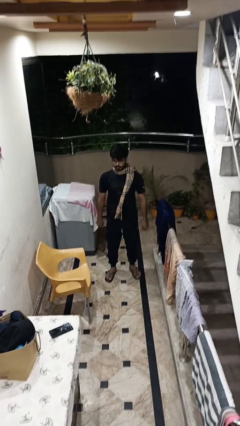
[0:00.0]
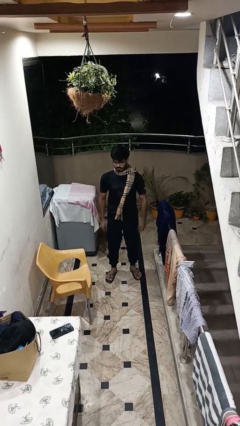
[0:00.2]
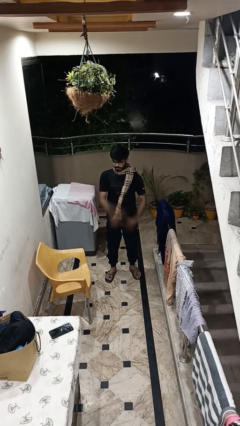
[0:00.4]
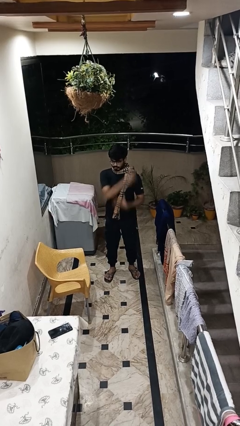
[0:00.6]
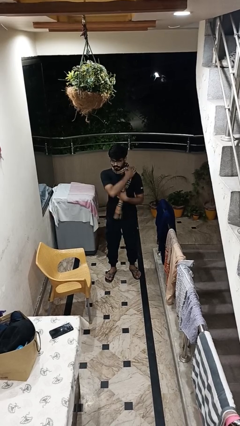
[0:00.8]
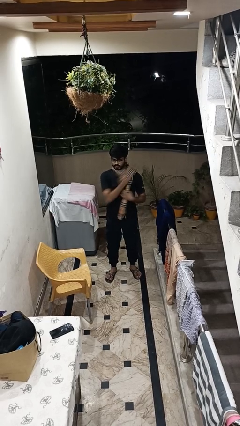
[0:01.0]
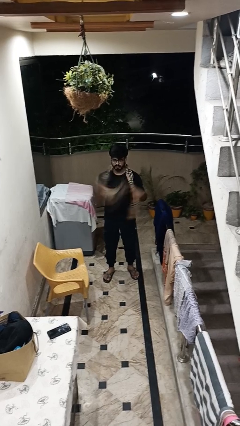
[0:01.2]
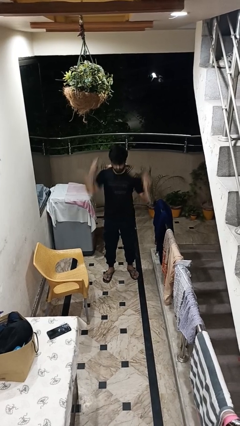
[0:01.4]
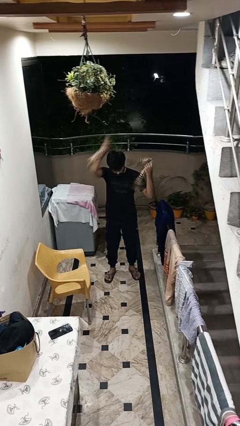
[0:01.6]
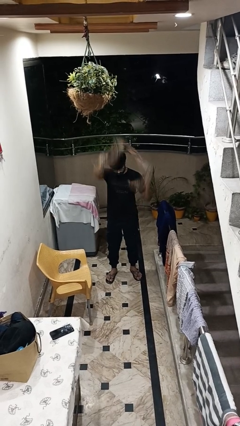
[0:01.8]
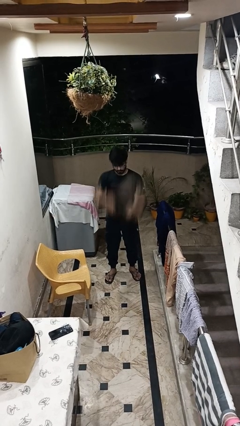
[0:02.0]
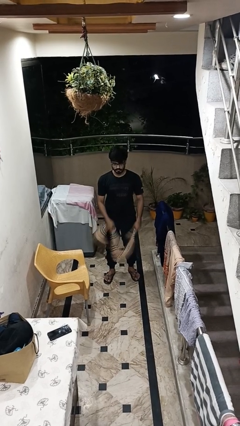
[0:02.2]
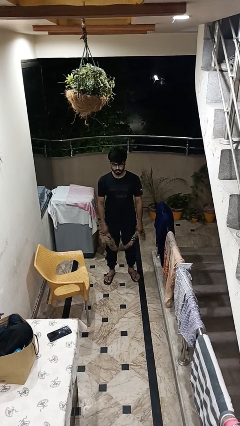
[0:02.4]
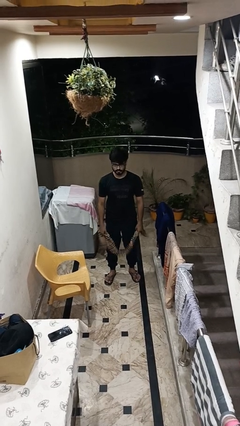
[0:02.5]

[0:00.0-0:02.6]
person takes off scarf

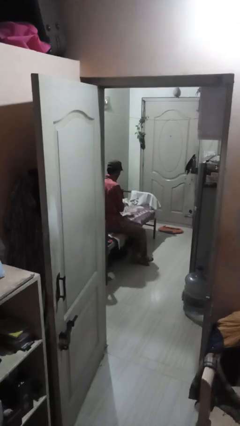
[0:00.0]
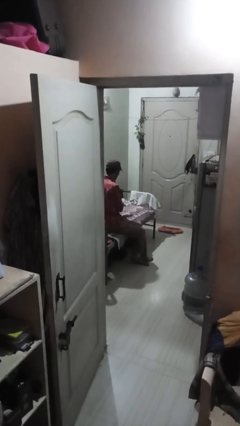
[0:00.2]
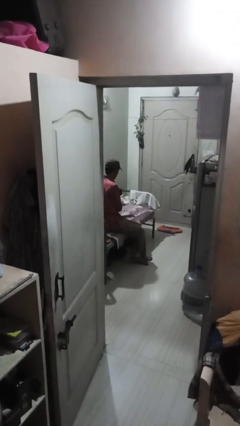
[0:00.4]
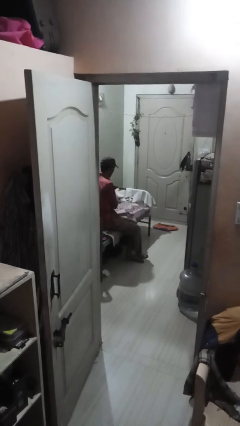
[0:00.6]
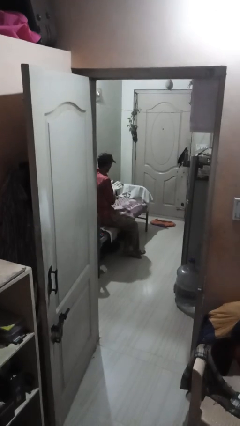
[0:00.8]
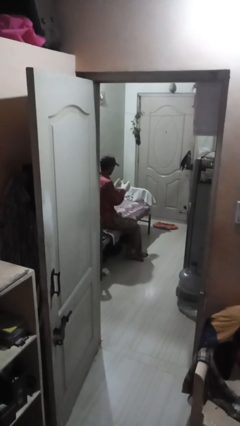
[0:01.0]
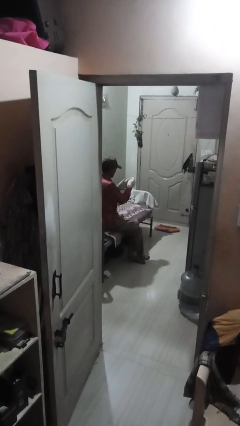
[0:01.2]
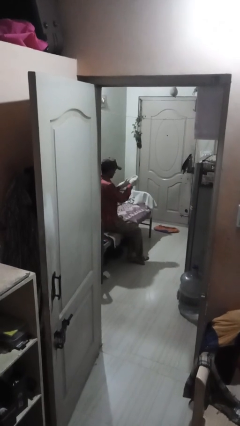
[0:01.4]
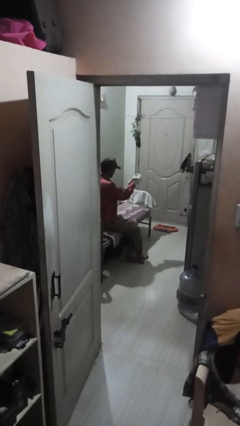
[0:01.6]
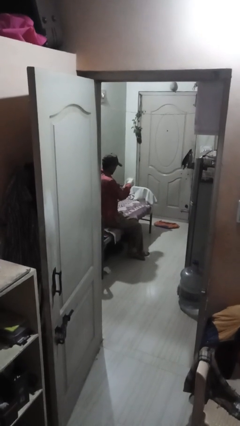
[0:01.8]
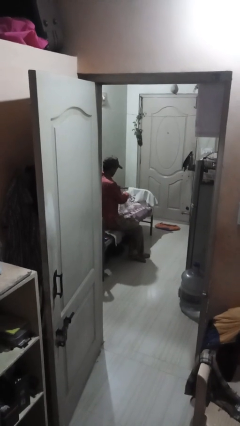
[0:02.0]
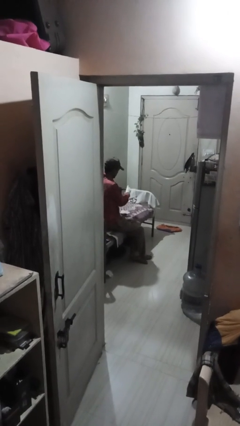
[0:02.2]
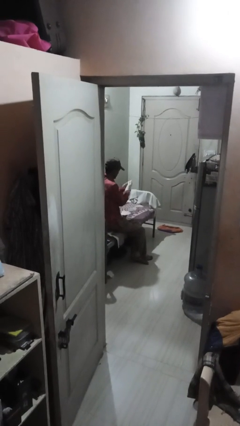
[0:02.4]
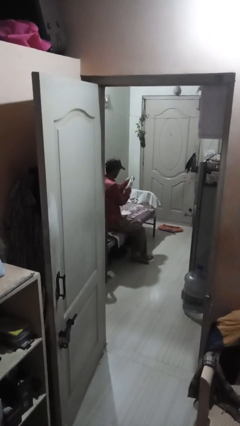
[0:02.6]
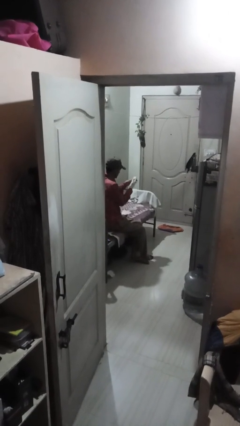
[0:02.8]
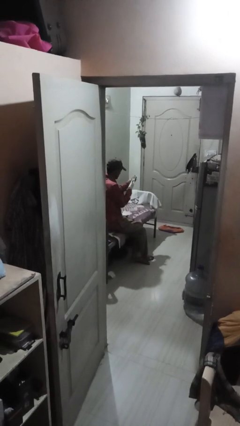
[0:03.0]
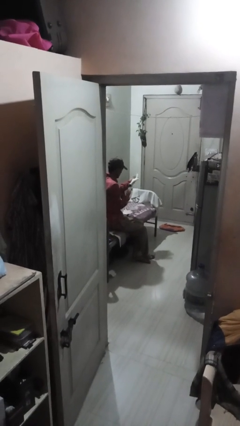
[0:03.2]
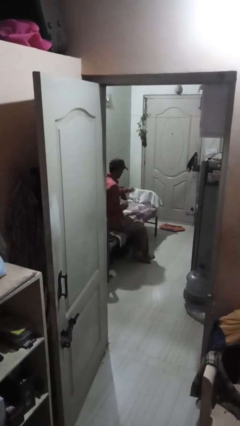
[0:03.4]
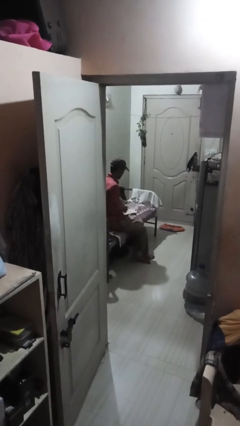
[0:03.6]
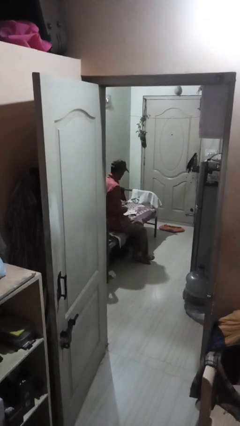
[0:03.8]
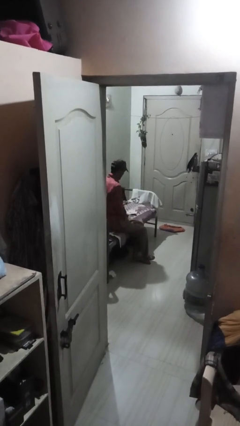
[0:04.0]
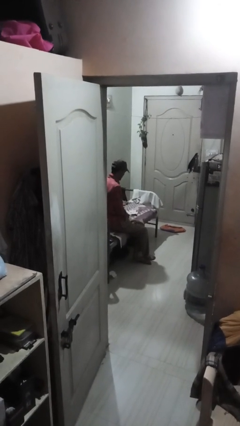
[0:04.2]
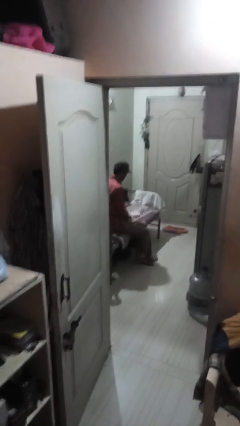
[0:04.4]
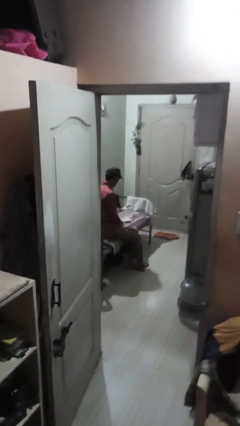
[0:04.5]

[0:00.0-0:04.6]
person takes off gloves

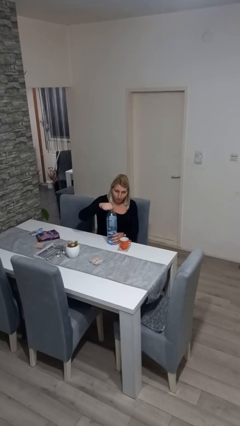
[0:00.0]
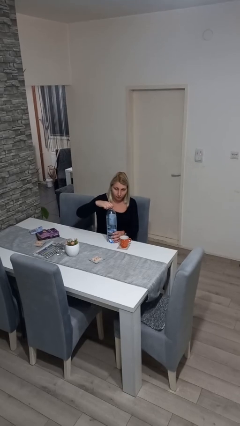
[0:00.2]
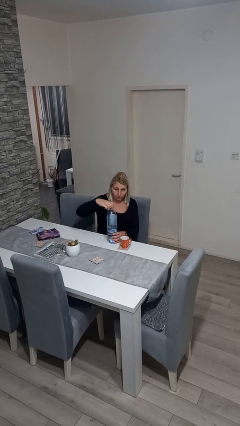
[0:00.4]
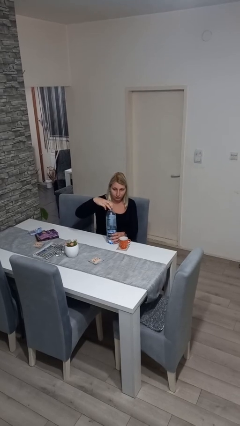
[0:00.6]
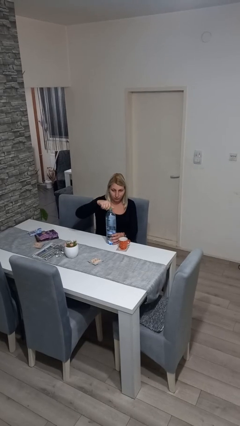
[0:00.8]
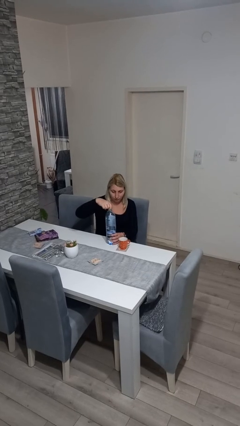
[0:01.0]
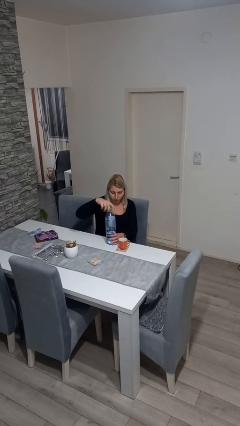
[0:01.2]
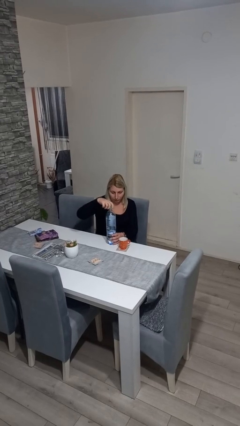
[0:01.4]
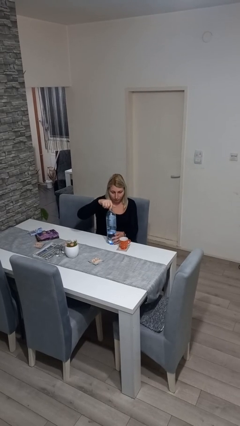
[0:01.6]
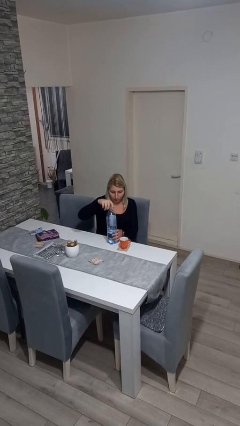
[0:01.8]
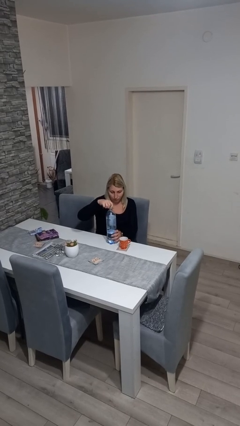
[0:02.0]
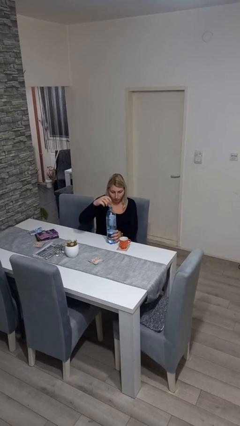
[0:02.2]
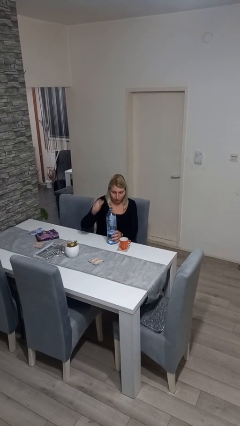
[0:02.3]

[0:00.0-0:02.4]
person unscrews lid from bottle

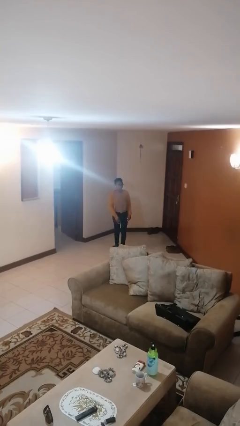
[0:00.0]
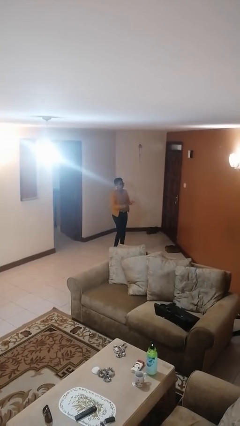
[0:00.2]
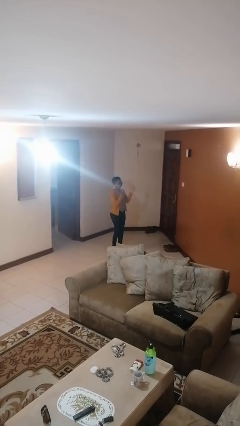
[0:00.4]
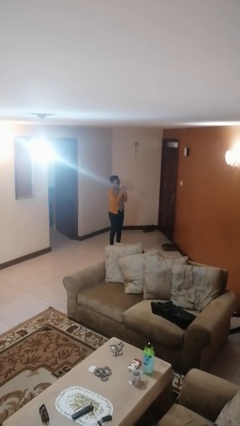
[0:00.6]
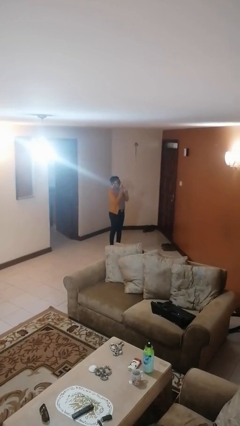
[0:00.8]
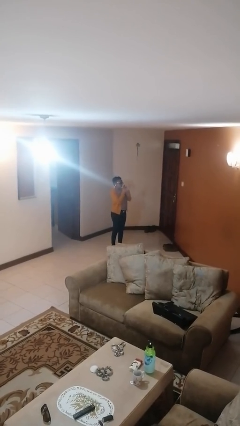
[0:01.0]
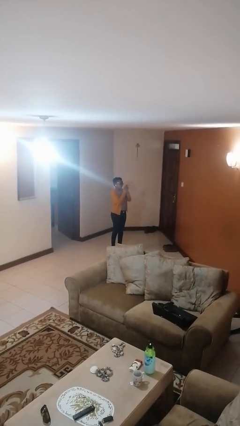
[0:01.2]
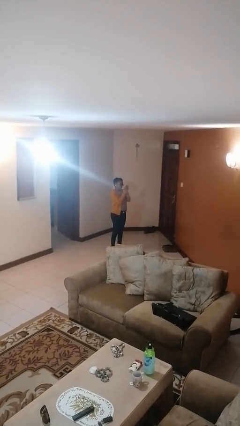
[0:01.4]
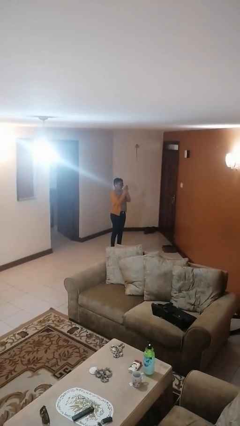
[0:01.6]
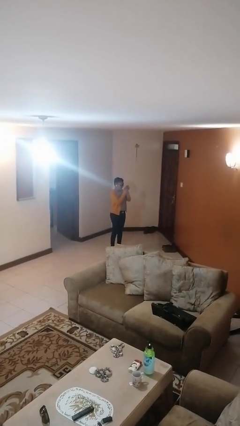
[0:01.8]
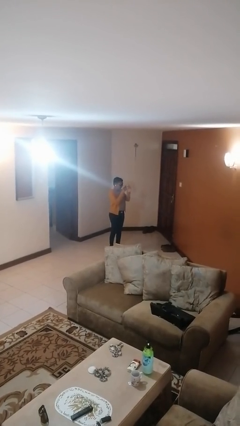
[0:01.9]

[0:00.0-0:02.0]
person claps hands

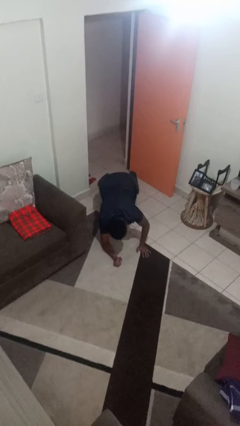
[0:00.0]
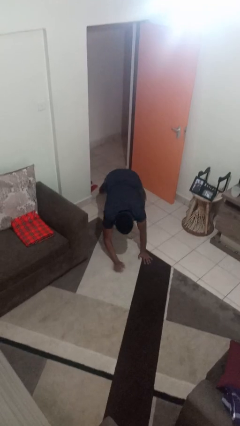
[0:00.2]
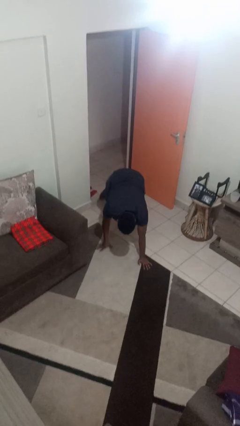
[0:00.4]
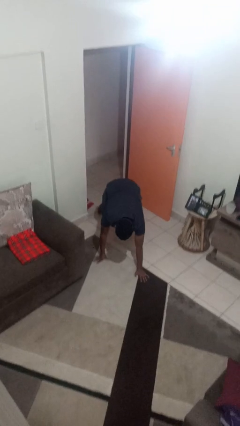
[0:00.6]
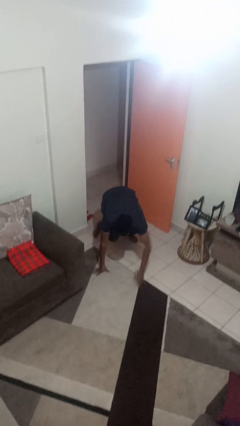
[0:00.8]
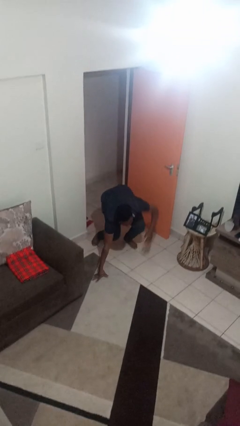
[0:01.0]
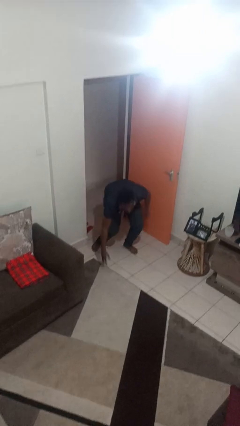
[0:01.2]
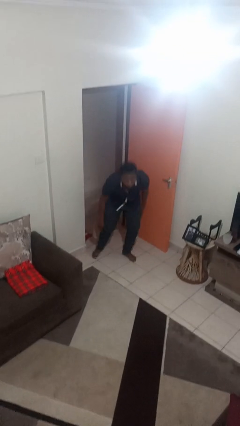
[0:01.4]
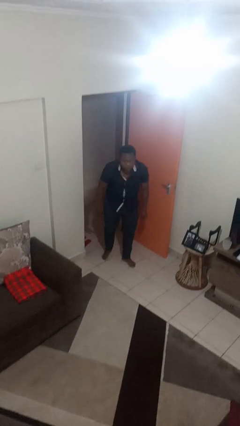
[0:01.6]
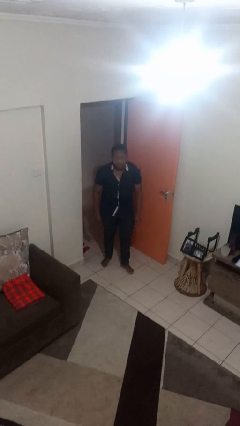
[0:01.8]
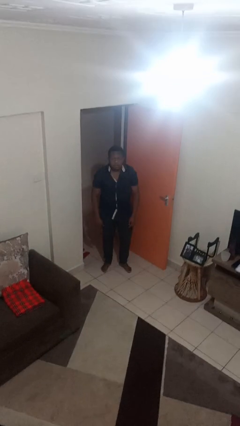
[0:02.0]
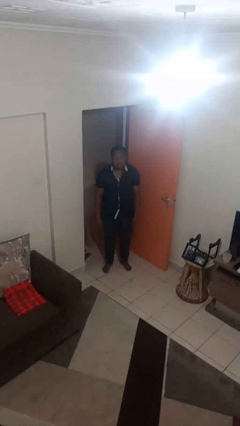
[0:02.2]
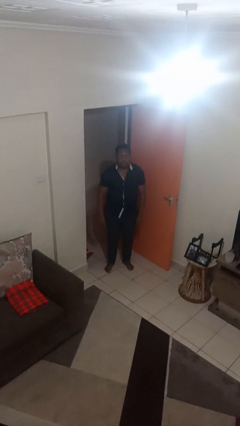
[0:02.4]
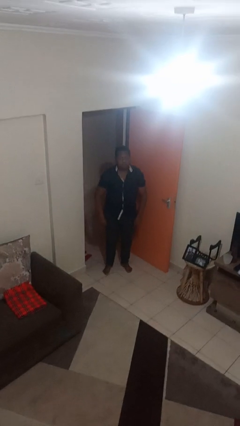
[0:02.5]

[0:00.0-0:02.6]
person stands up from floor

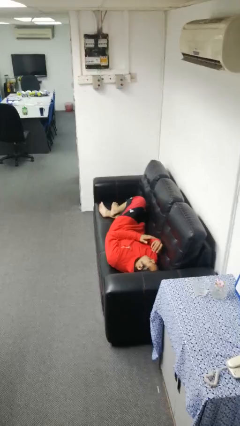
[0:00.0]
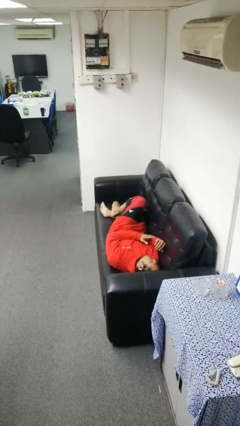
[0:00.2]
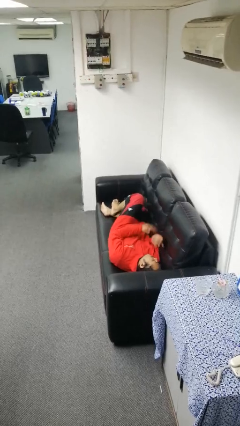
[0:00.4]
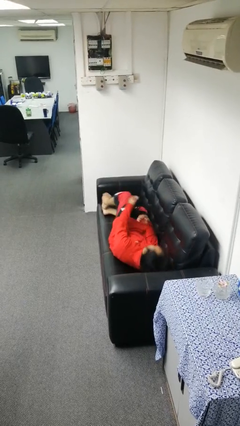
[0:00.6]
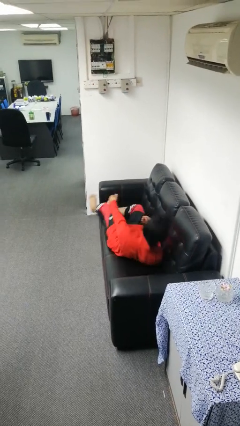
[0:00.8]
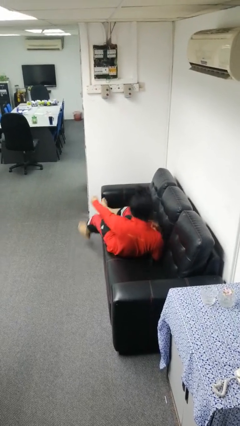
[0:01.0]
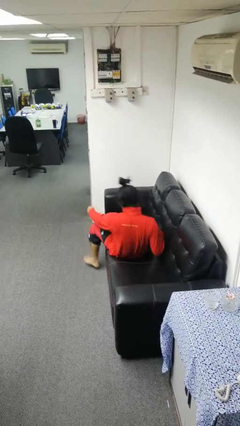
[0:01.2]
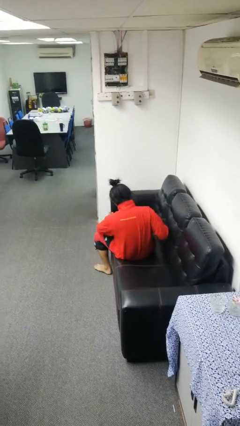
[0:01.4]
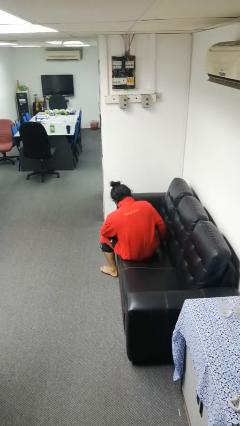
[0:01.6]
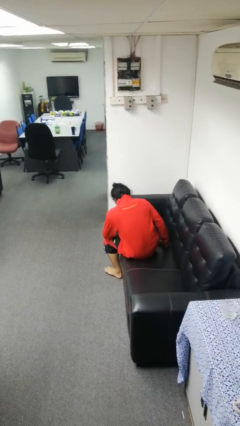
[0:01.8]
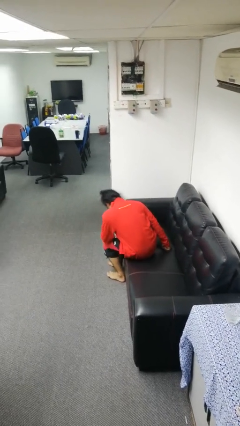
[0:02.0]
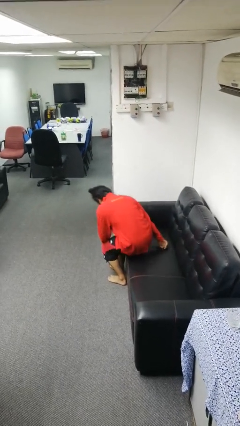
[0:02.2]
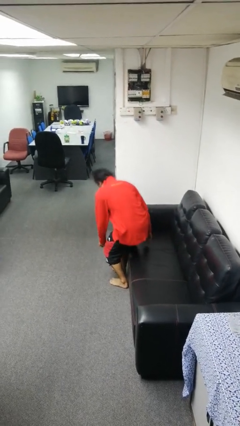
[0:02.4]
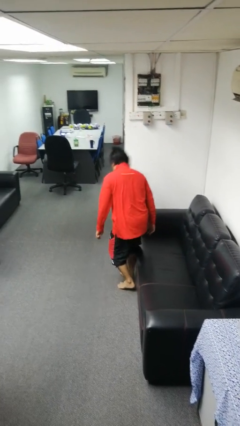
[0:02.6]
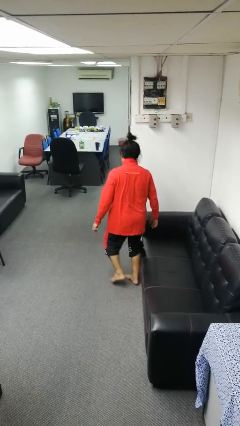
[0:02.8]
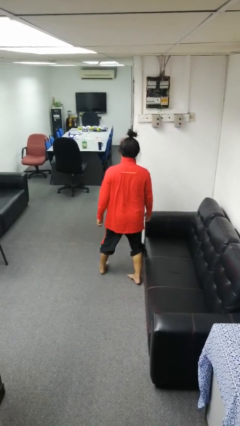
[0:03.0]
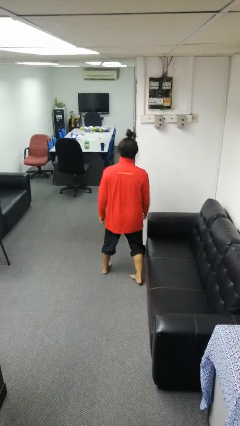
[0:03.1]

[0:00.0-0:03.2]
person stands up
